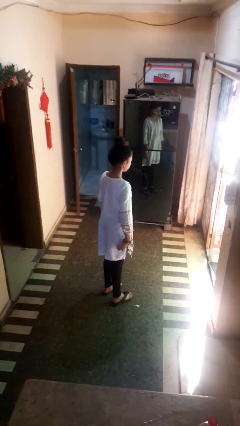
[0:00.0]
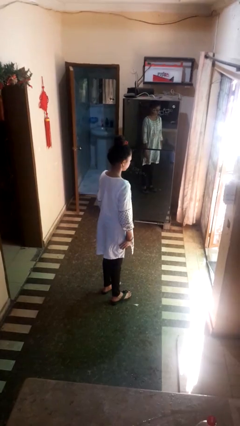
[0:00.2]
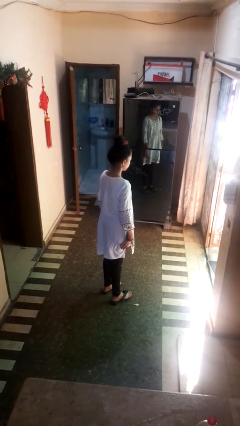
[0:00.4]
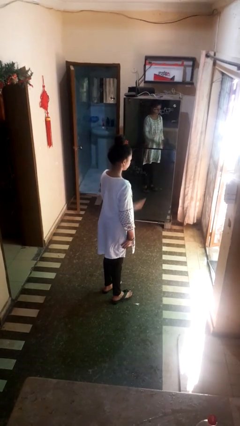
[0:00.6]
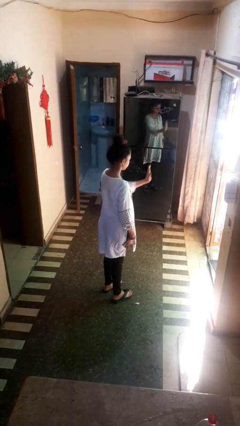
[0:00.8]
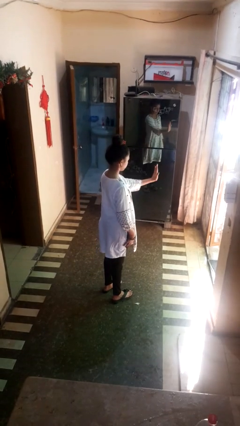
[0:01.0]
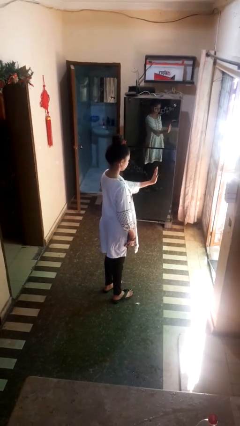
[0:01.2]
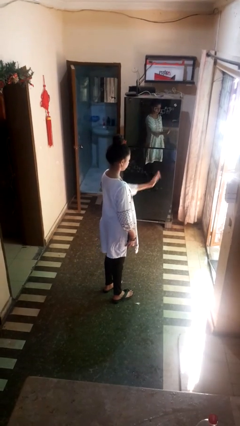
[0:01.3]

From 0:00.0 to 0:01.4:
person gestures stop

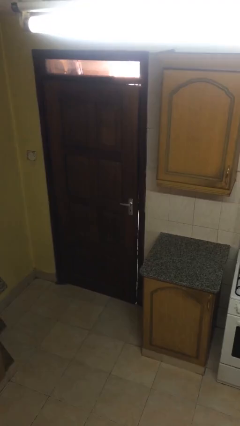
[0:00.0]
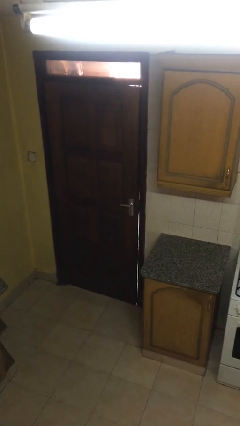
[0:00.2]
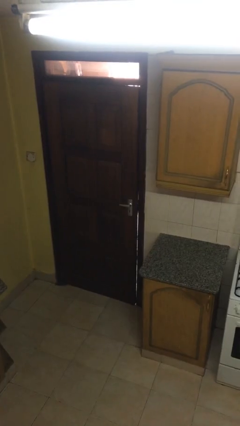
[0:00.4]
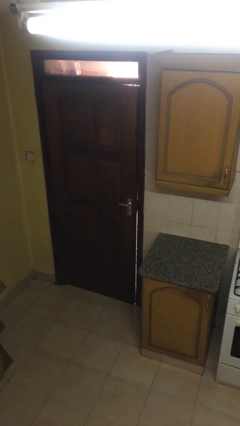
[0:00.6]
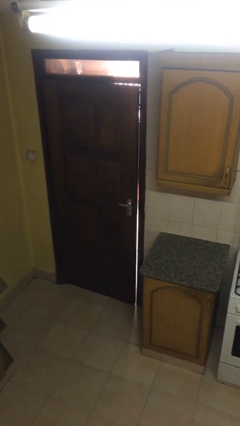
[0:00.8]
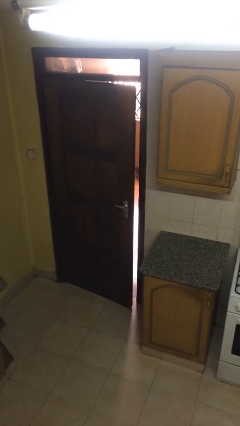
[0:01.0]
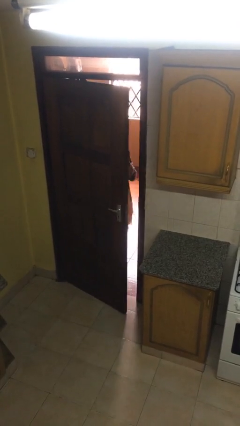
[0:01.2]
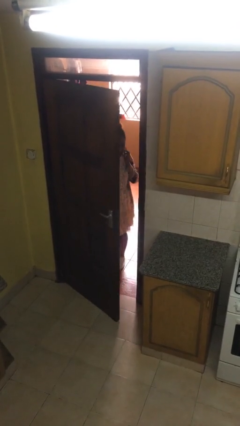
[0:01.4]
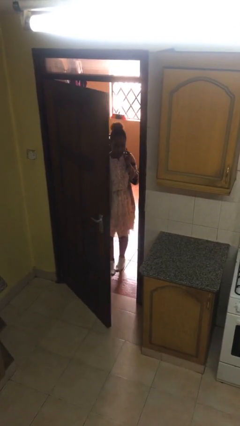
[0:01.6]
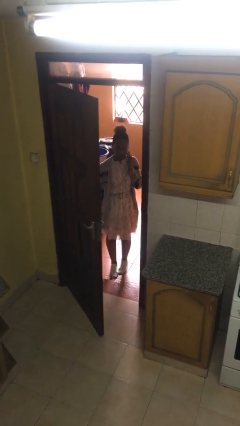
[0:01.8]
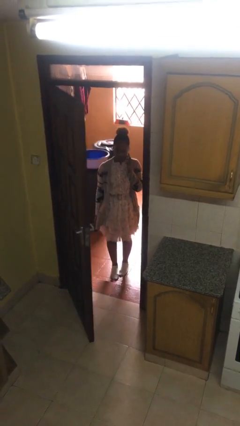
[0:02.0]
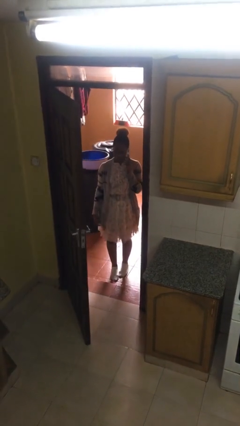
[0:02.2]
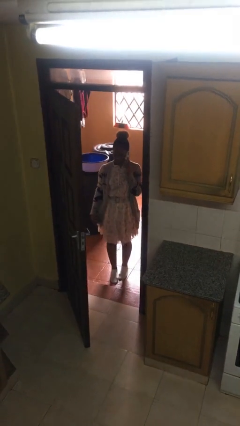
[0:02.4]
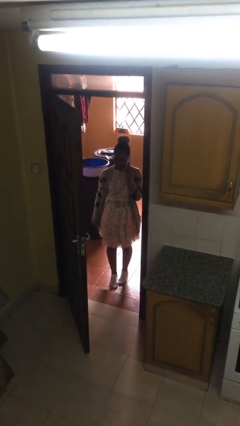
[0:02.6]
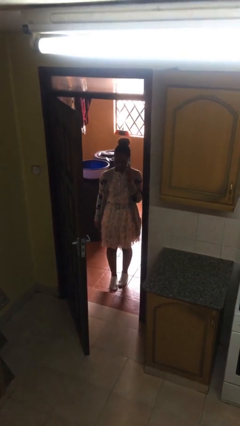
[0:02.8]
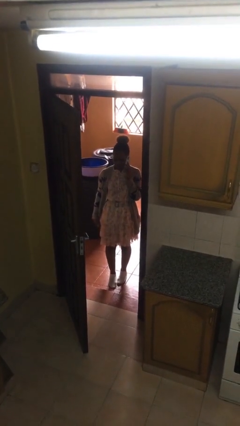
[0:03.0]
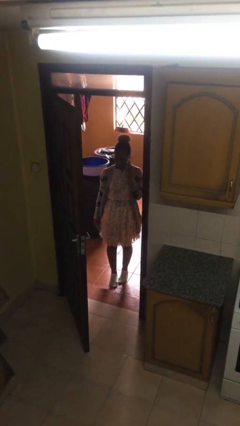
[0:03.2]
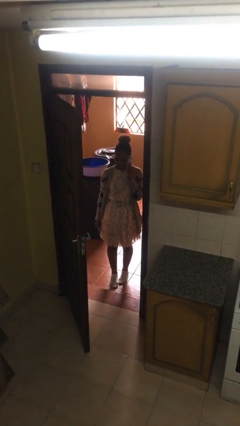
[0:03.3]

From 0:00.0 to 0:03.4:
person opens facility door

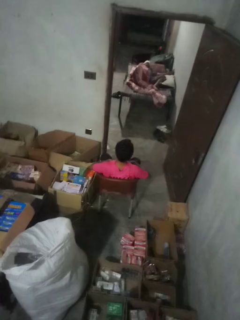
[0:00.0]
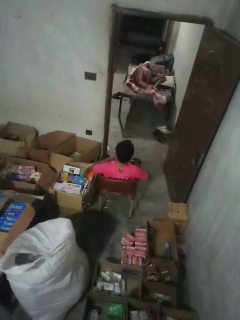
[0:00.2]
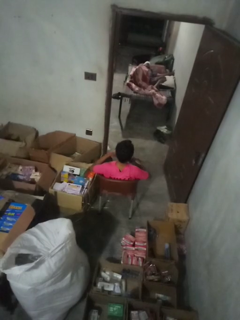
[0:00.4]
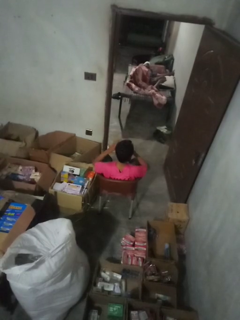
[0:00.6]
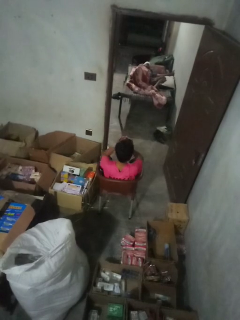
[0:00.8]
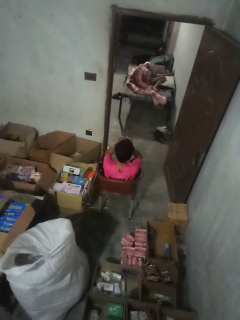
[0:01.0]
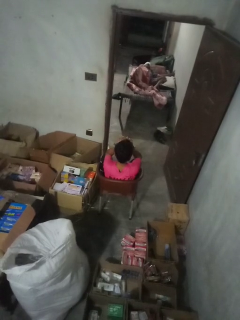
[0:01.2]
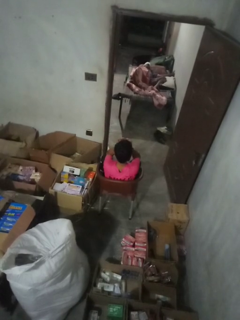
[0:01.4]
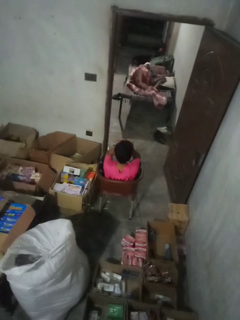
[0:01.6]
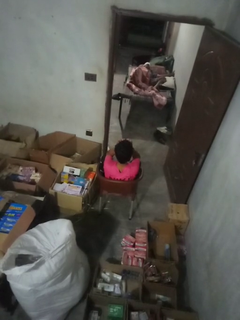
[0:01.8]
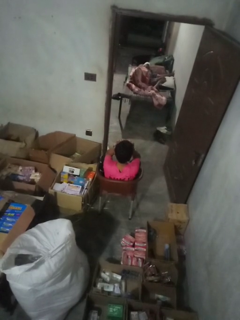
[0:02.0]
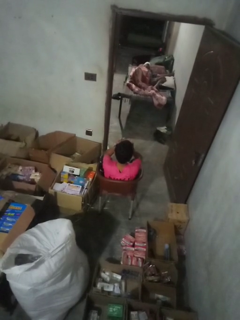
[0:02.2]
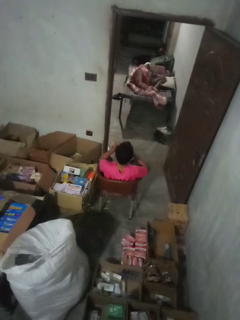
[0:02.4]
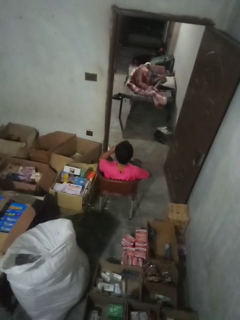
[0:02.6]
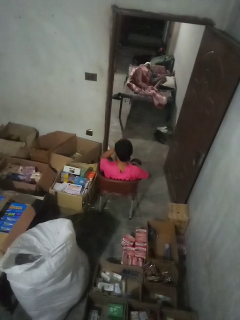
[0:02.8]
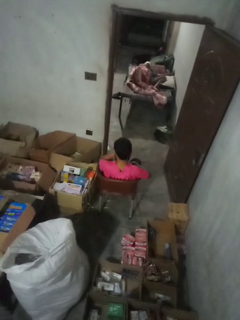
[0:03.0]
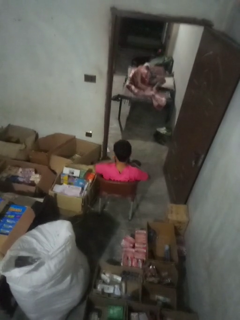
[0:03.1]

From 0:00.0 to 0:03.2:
person rubs eyes

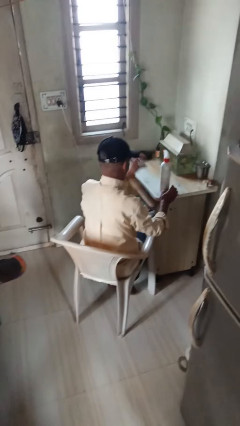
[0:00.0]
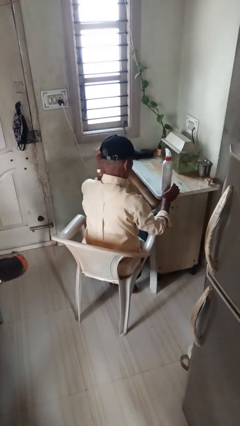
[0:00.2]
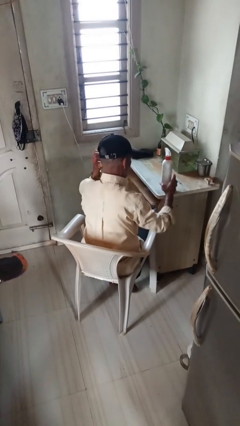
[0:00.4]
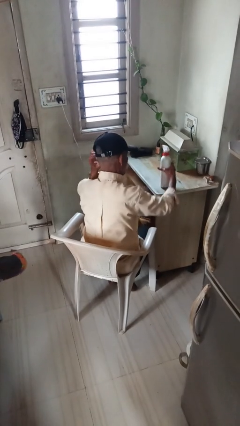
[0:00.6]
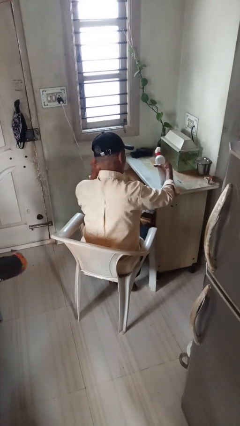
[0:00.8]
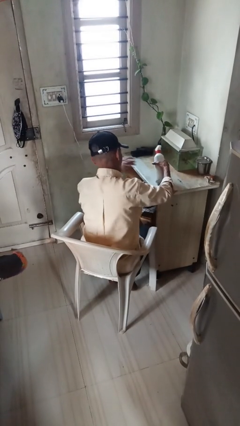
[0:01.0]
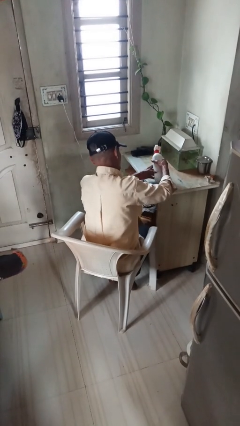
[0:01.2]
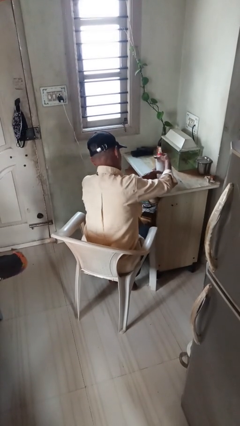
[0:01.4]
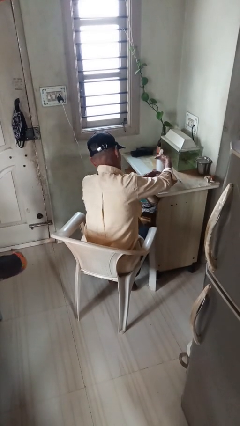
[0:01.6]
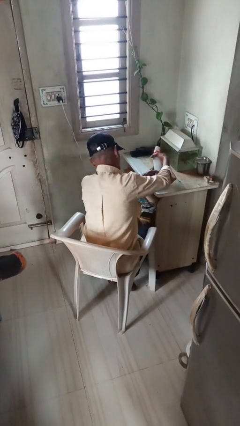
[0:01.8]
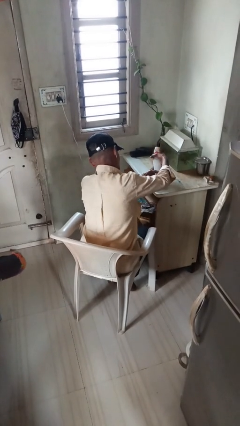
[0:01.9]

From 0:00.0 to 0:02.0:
person sprays from bottle

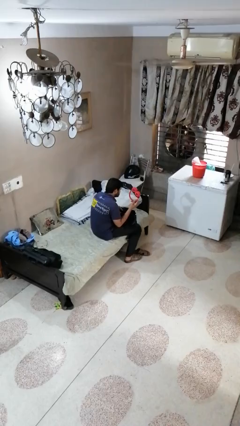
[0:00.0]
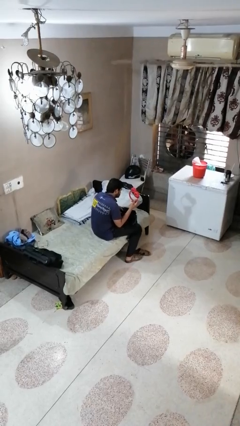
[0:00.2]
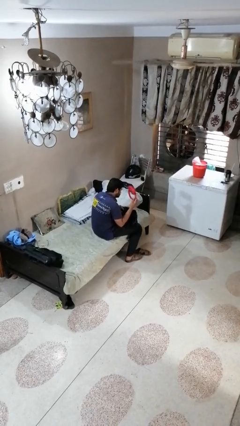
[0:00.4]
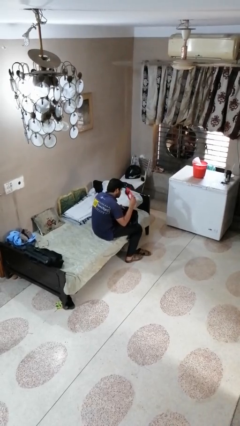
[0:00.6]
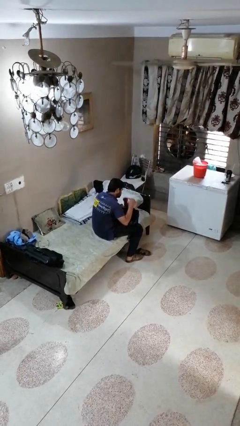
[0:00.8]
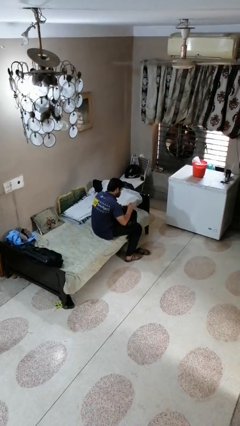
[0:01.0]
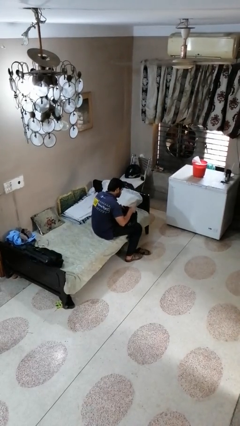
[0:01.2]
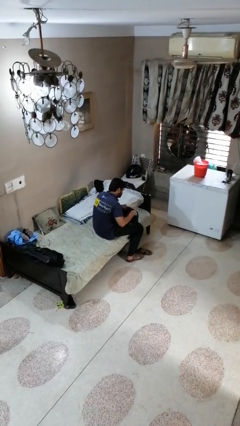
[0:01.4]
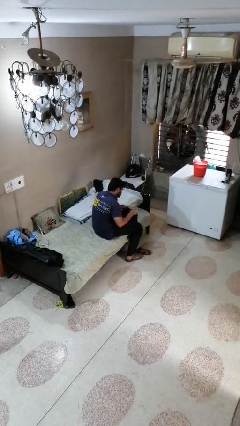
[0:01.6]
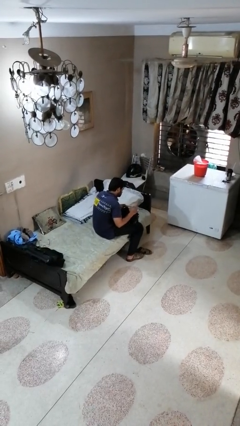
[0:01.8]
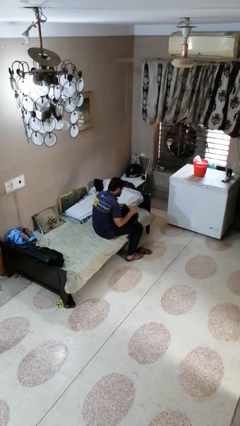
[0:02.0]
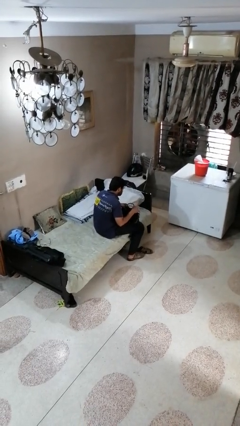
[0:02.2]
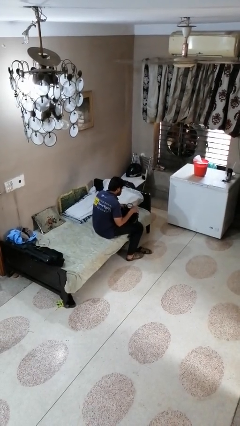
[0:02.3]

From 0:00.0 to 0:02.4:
person puts object into purse

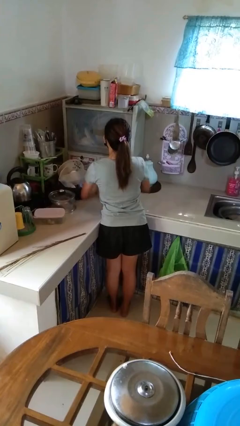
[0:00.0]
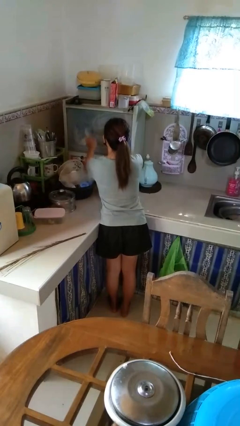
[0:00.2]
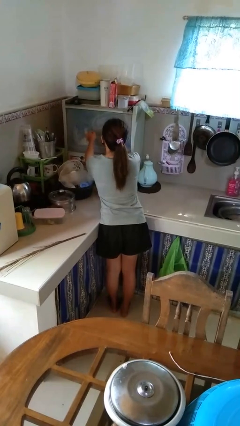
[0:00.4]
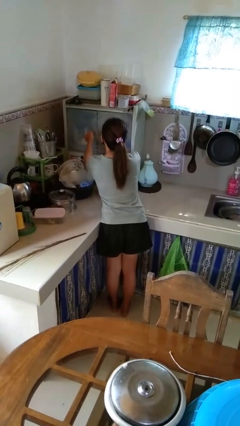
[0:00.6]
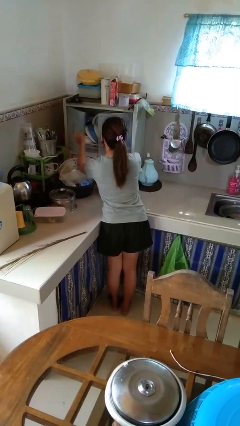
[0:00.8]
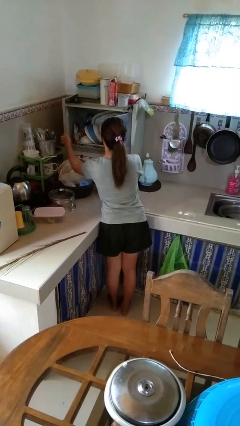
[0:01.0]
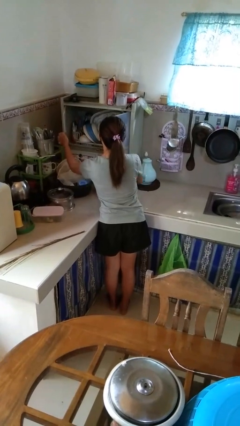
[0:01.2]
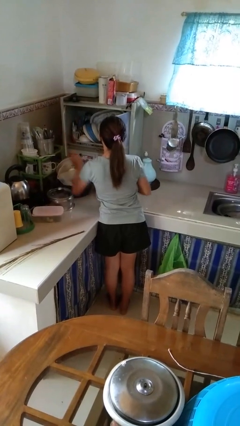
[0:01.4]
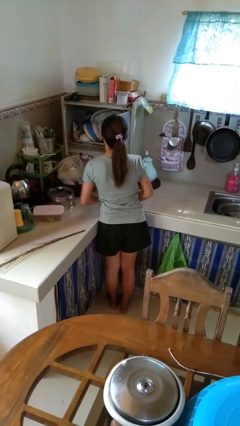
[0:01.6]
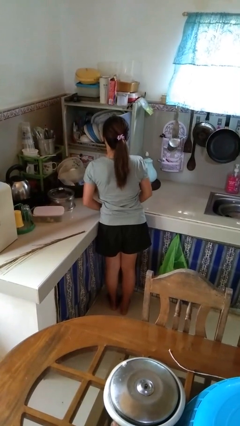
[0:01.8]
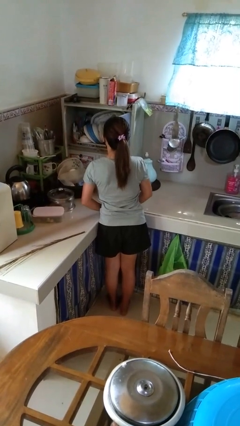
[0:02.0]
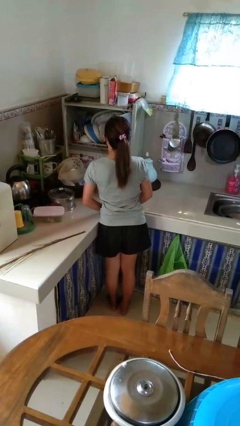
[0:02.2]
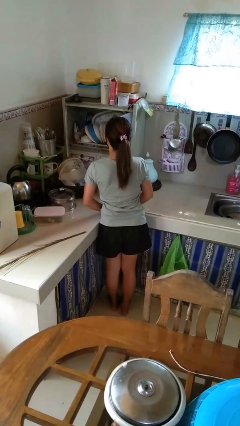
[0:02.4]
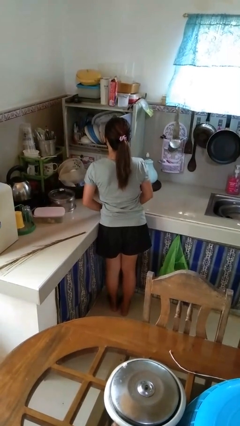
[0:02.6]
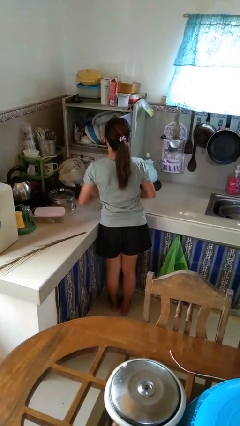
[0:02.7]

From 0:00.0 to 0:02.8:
person opens kitchen drawer

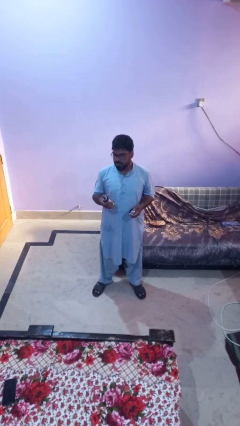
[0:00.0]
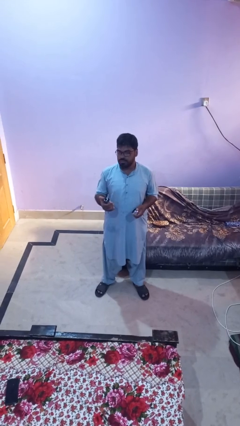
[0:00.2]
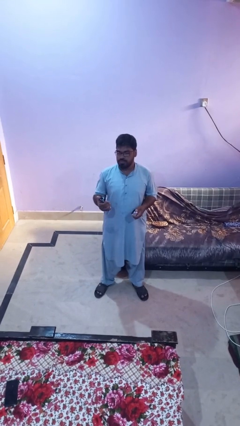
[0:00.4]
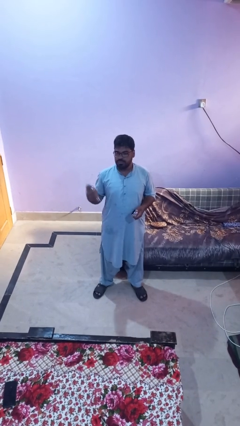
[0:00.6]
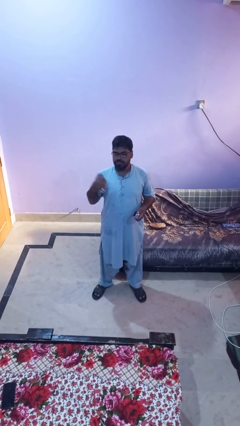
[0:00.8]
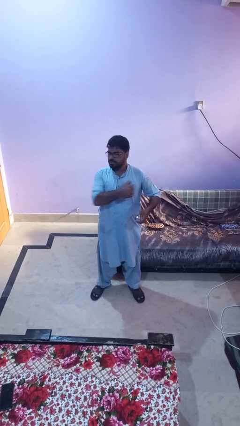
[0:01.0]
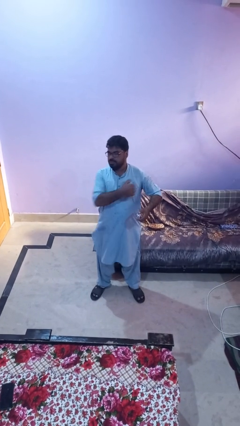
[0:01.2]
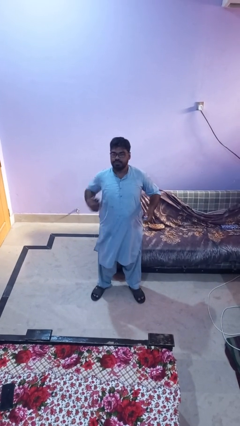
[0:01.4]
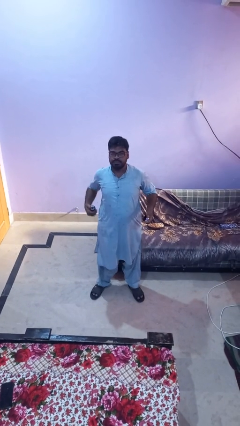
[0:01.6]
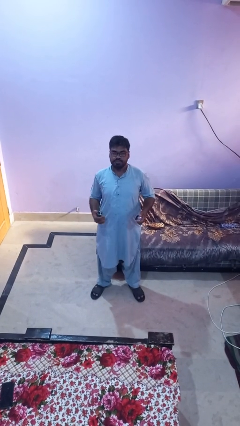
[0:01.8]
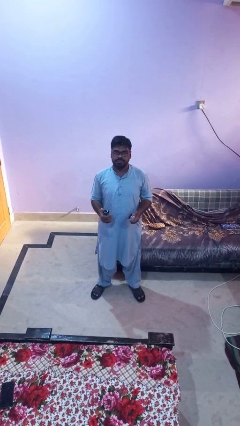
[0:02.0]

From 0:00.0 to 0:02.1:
person applies deodorant

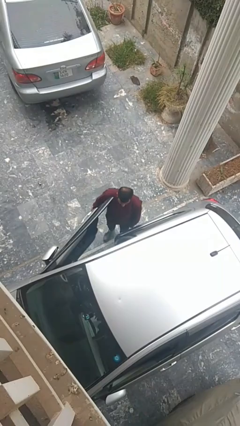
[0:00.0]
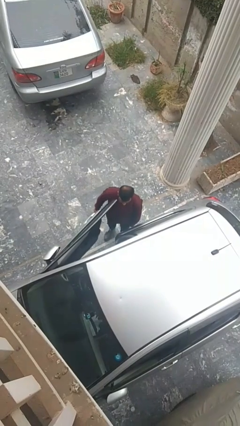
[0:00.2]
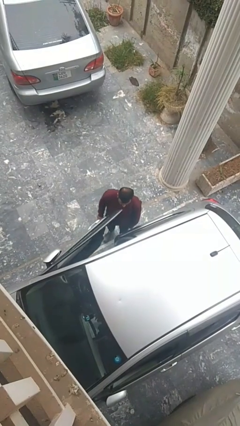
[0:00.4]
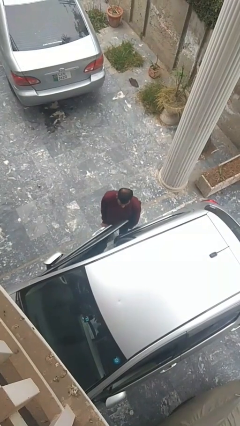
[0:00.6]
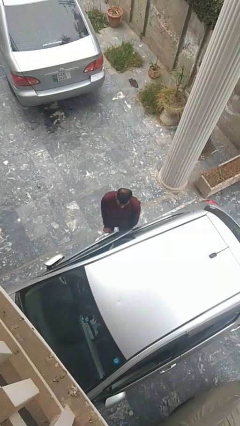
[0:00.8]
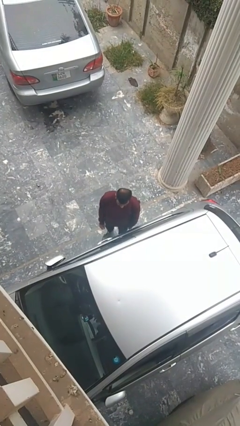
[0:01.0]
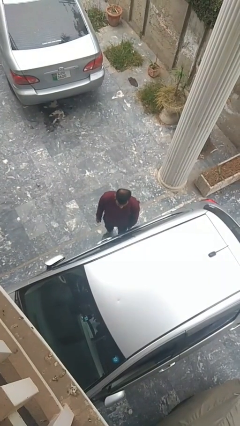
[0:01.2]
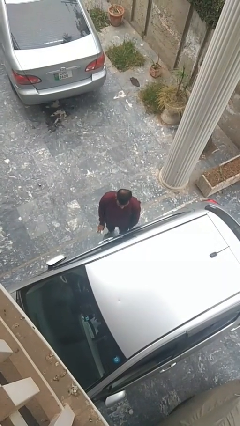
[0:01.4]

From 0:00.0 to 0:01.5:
person closes car door
